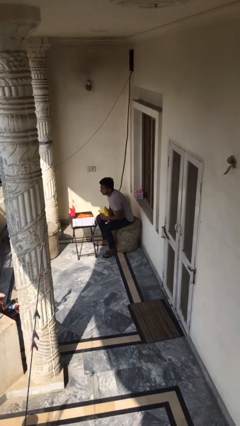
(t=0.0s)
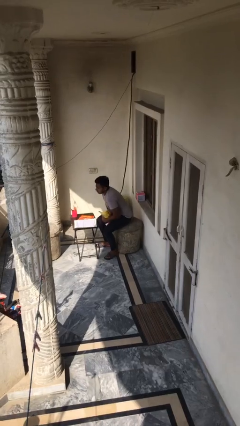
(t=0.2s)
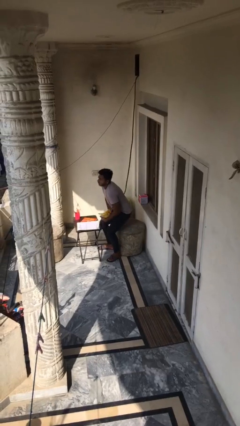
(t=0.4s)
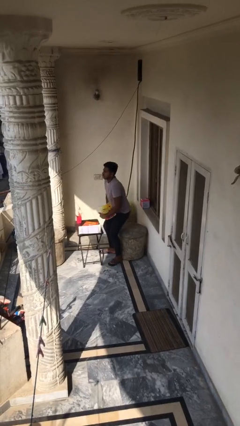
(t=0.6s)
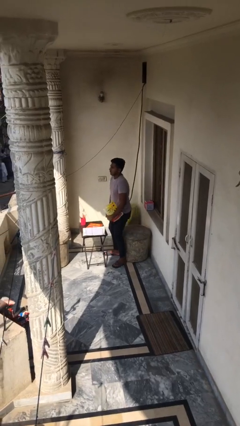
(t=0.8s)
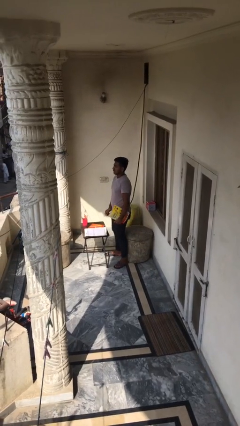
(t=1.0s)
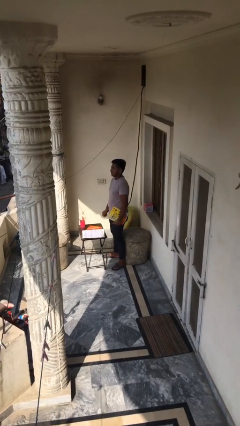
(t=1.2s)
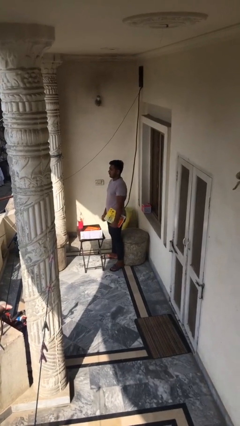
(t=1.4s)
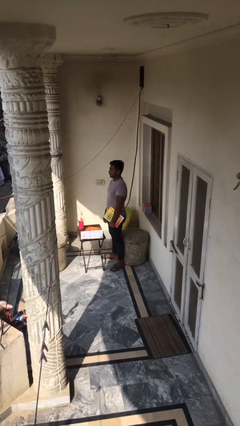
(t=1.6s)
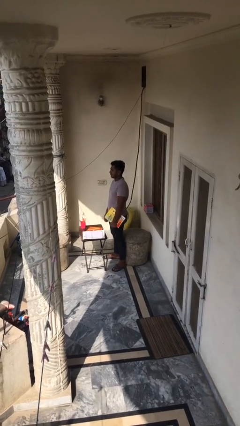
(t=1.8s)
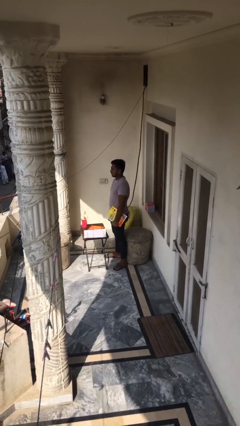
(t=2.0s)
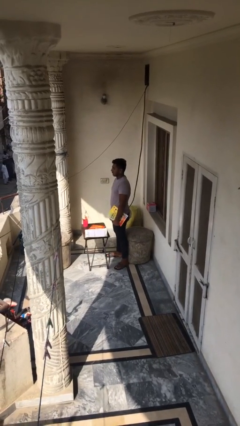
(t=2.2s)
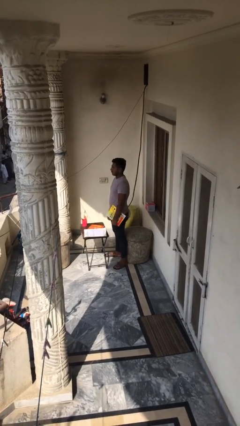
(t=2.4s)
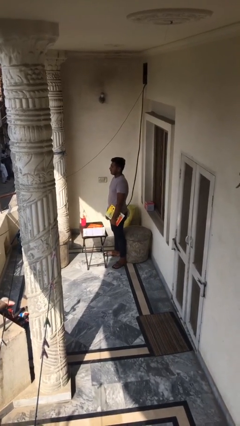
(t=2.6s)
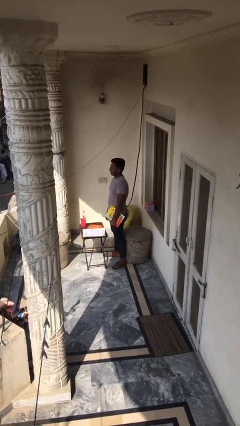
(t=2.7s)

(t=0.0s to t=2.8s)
person stands up

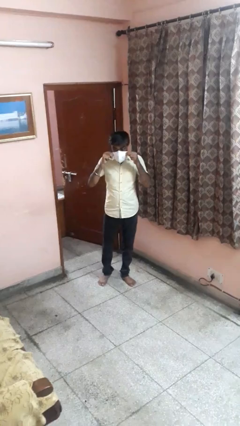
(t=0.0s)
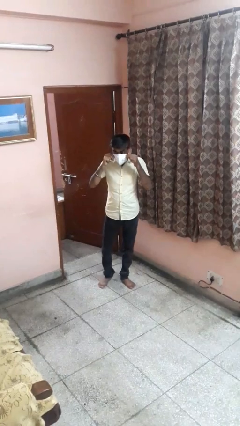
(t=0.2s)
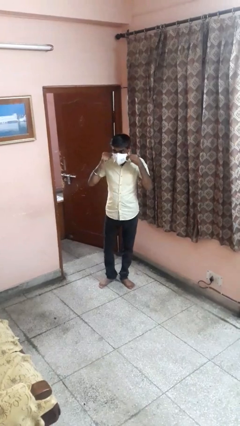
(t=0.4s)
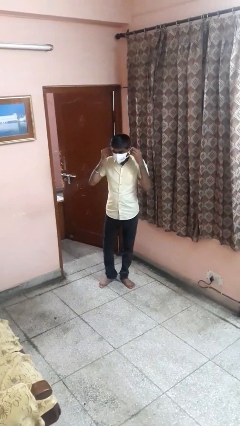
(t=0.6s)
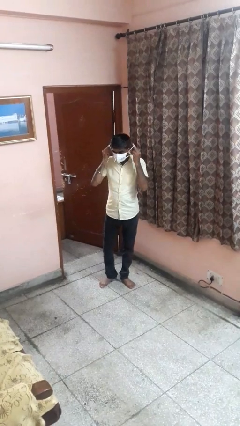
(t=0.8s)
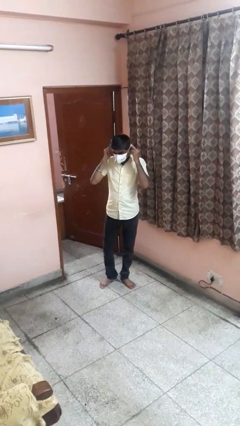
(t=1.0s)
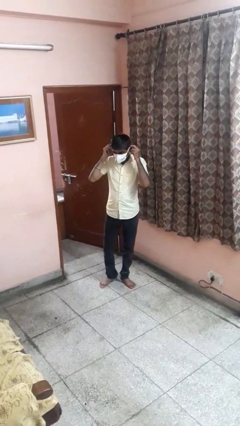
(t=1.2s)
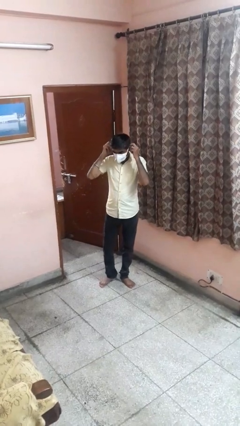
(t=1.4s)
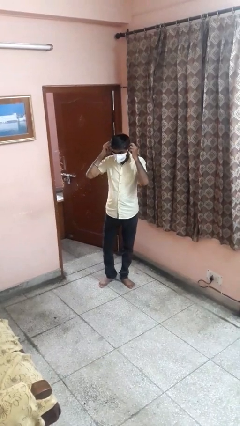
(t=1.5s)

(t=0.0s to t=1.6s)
person puts on facemask

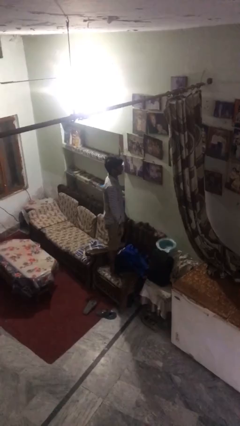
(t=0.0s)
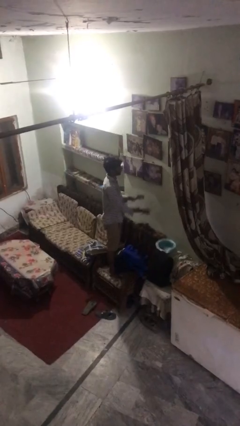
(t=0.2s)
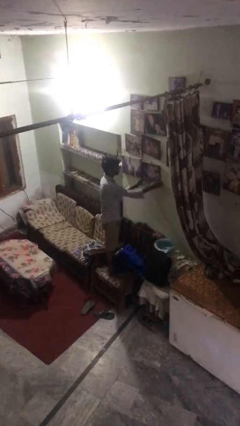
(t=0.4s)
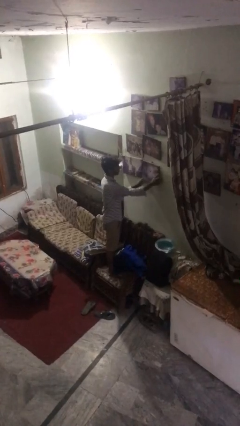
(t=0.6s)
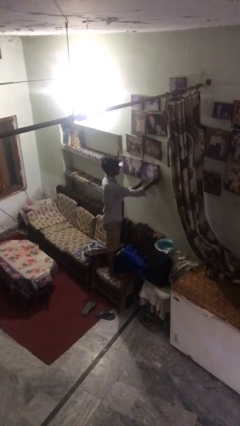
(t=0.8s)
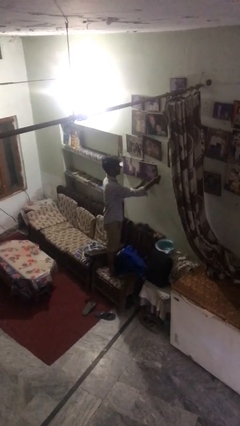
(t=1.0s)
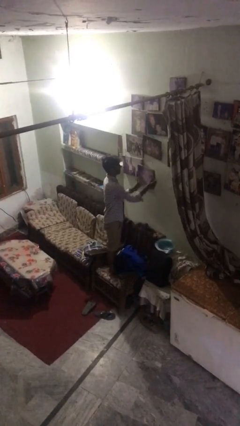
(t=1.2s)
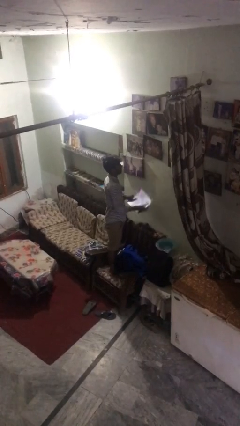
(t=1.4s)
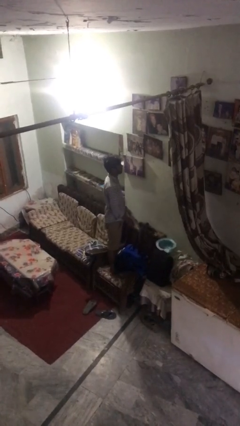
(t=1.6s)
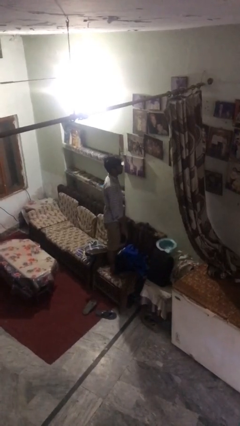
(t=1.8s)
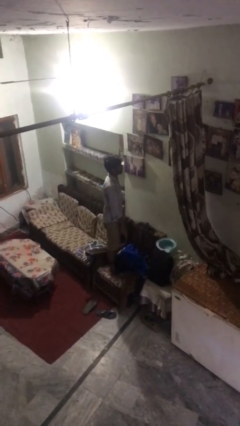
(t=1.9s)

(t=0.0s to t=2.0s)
person takes down picture frame

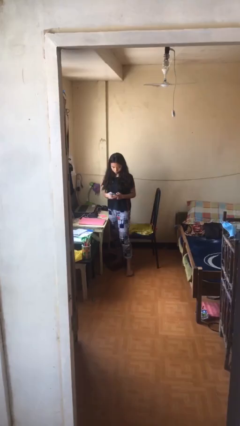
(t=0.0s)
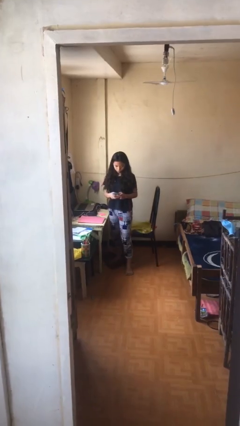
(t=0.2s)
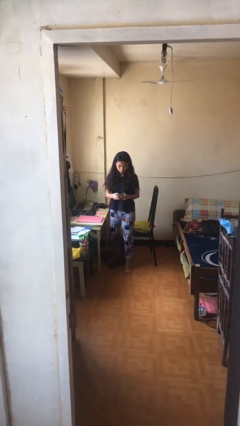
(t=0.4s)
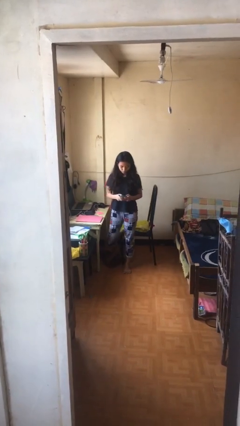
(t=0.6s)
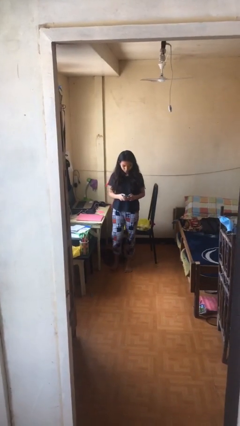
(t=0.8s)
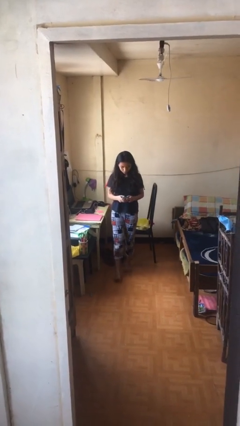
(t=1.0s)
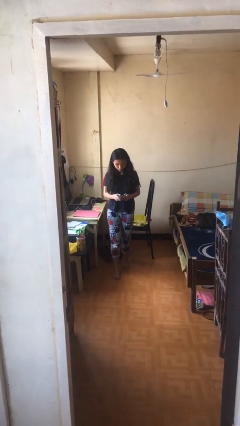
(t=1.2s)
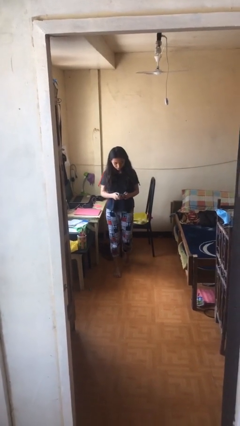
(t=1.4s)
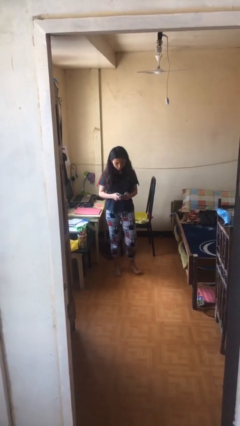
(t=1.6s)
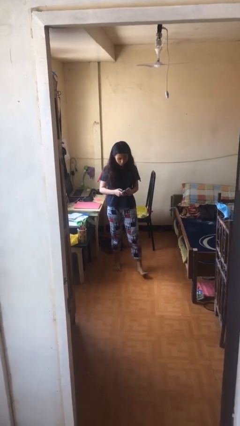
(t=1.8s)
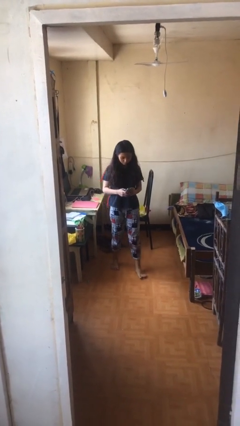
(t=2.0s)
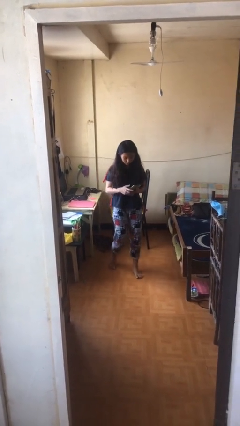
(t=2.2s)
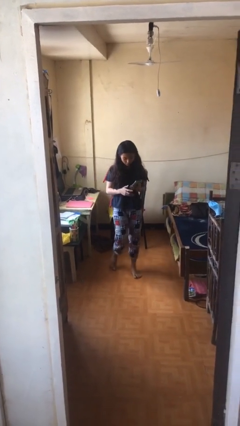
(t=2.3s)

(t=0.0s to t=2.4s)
person texts on phone

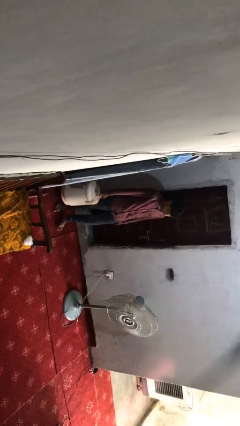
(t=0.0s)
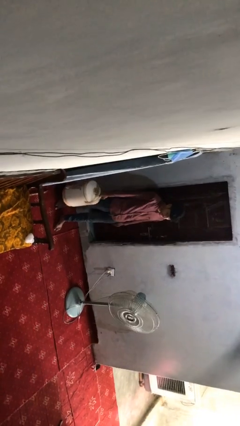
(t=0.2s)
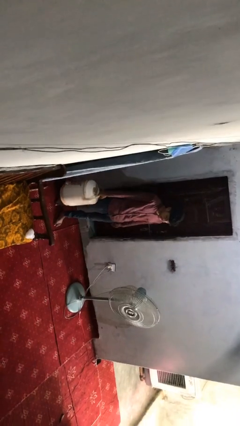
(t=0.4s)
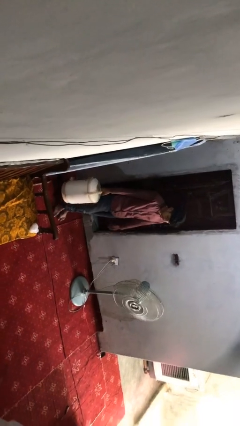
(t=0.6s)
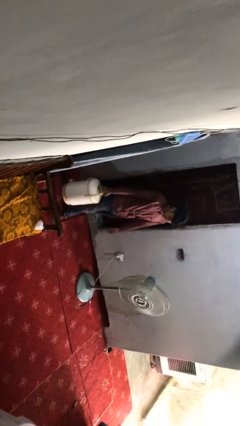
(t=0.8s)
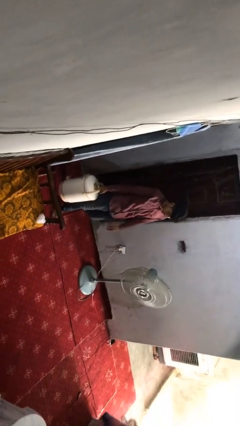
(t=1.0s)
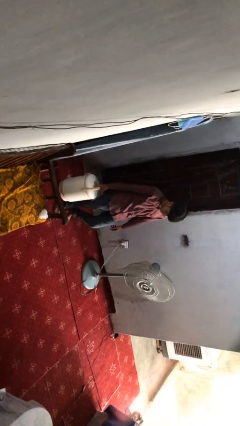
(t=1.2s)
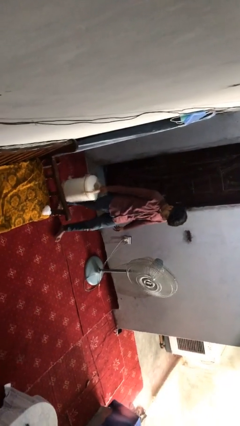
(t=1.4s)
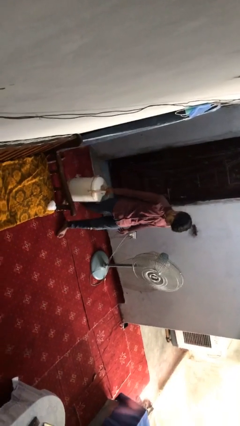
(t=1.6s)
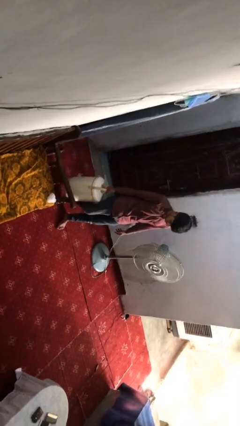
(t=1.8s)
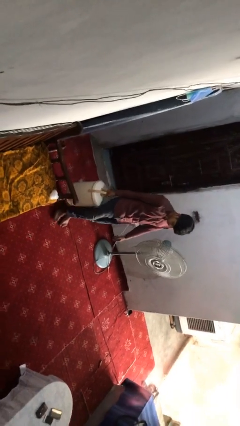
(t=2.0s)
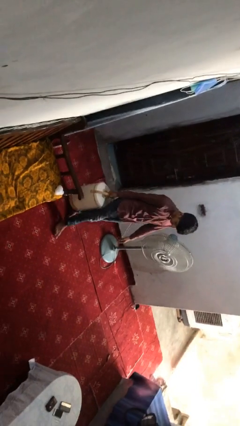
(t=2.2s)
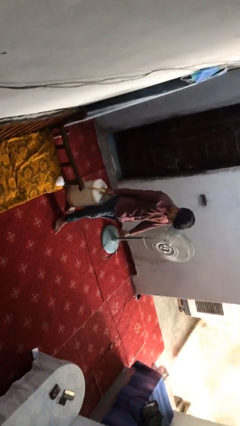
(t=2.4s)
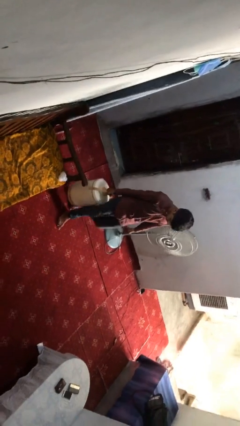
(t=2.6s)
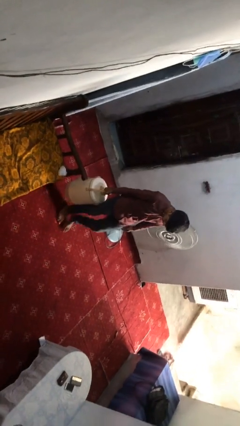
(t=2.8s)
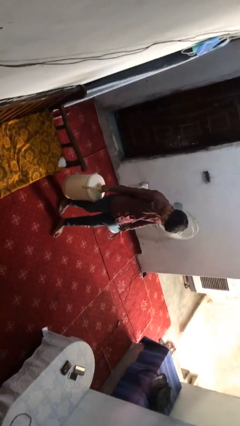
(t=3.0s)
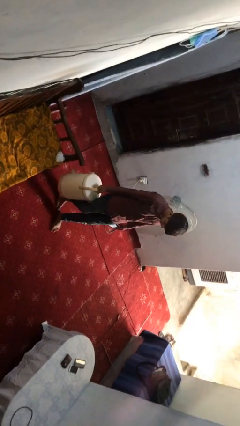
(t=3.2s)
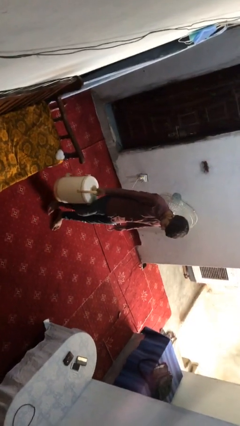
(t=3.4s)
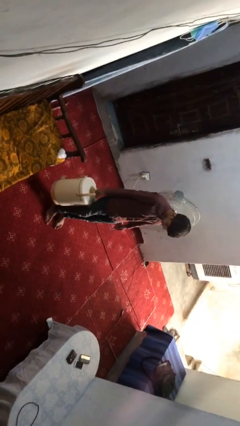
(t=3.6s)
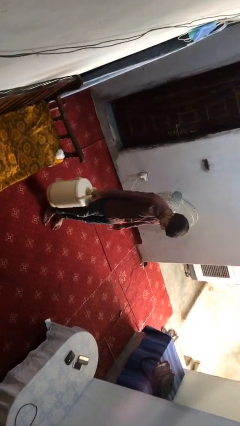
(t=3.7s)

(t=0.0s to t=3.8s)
person carries heavy object

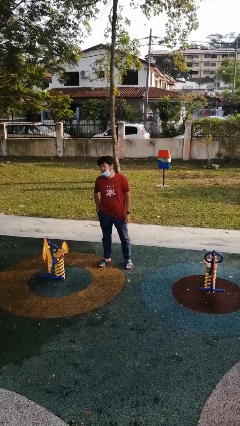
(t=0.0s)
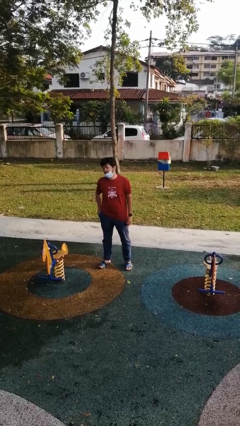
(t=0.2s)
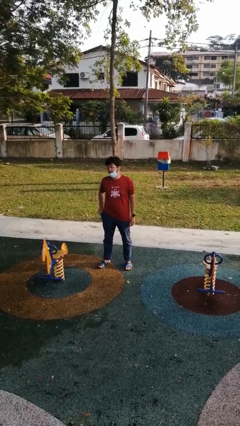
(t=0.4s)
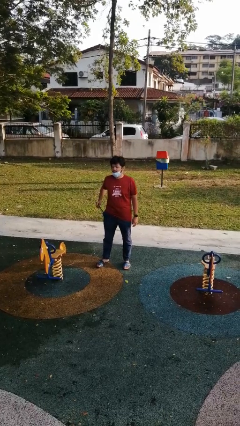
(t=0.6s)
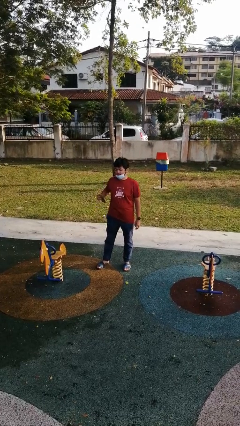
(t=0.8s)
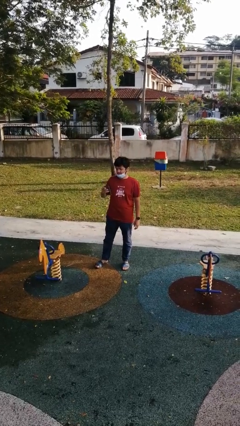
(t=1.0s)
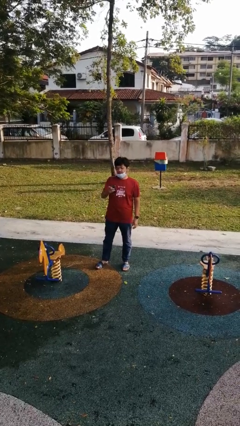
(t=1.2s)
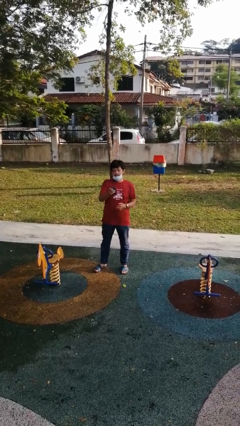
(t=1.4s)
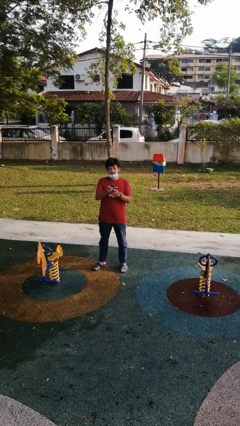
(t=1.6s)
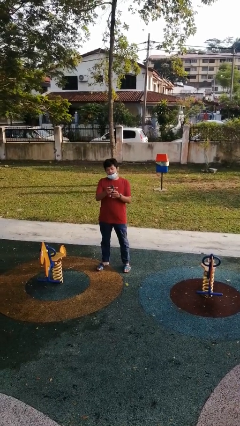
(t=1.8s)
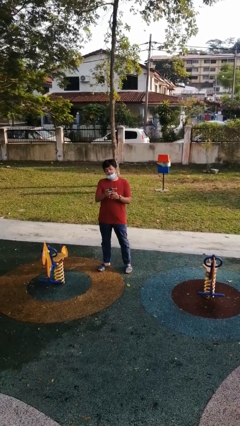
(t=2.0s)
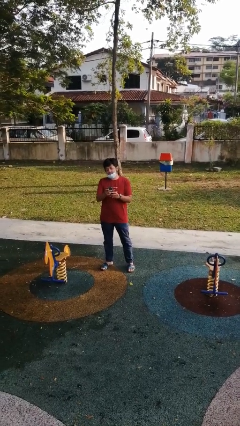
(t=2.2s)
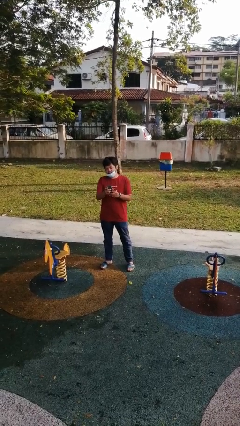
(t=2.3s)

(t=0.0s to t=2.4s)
person takes phone from pocket

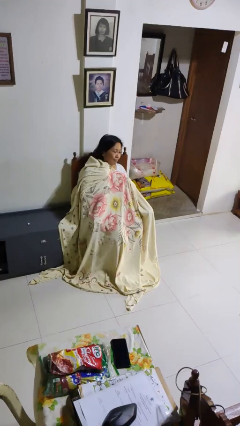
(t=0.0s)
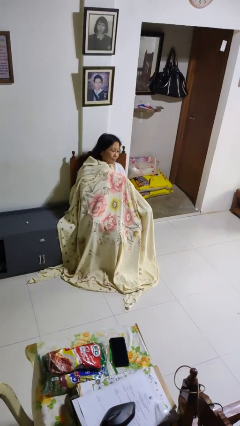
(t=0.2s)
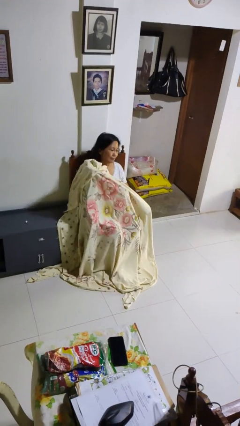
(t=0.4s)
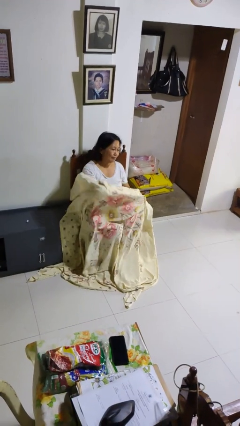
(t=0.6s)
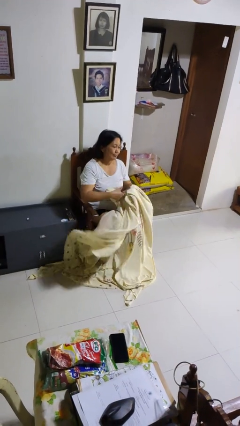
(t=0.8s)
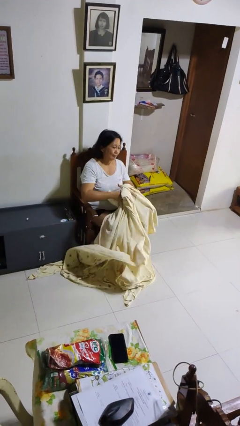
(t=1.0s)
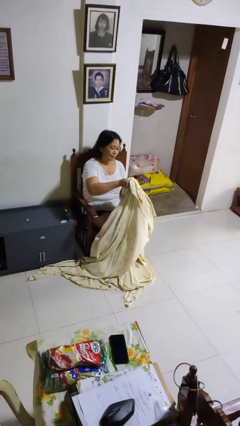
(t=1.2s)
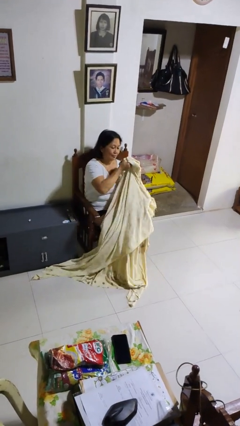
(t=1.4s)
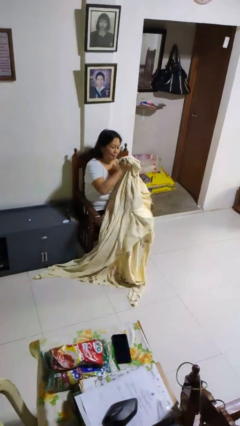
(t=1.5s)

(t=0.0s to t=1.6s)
person uncovers with blanket

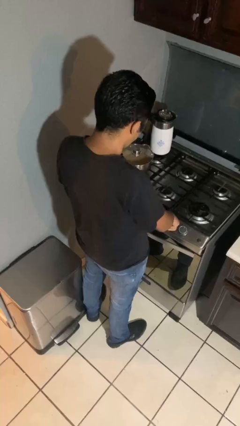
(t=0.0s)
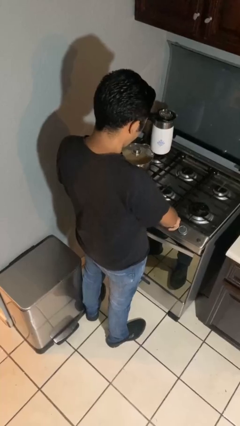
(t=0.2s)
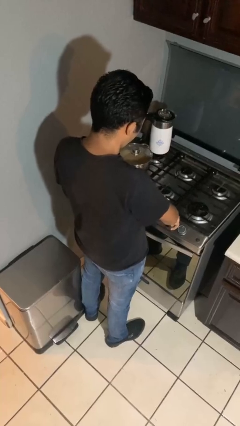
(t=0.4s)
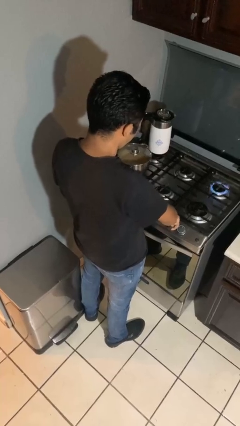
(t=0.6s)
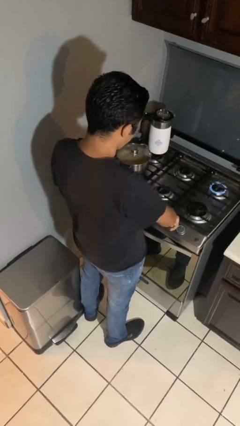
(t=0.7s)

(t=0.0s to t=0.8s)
person turns on stovetop
